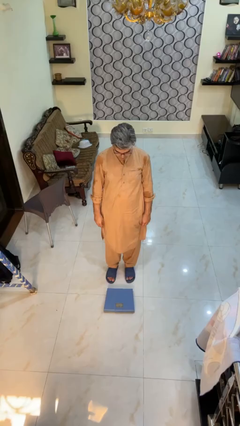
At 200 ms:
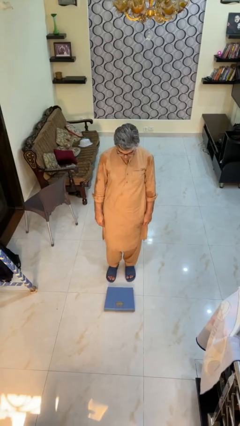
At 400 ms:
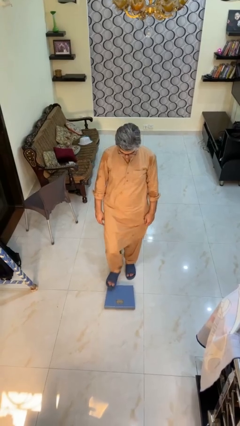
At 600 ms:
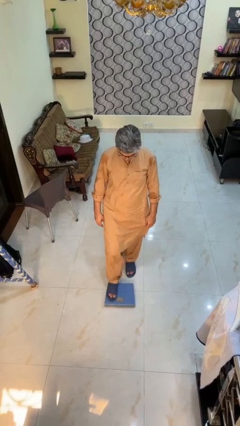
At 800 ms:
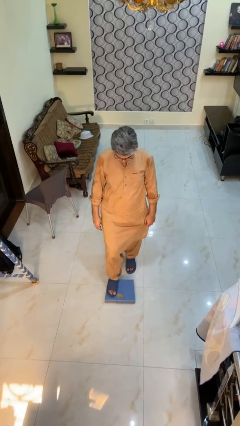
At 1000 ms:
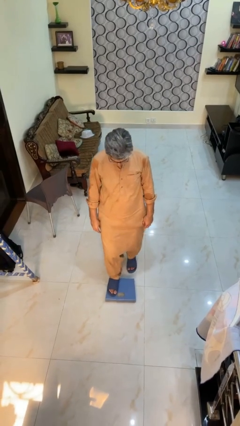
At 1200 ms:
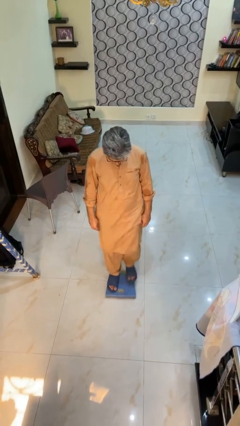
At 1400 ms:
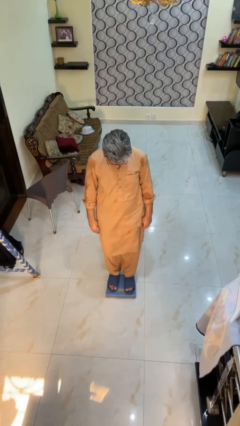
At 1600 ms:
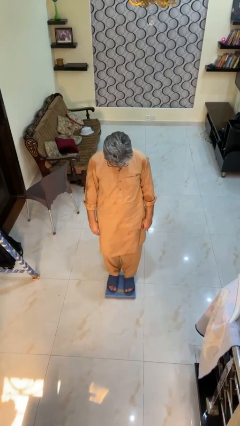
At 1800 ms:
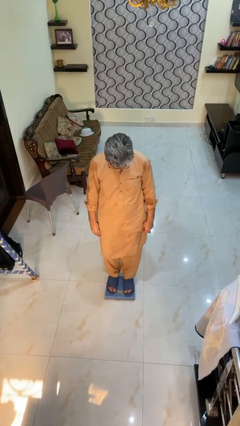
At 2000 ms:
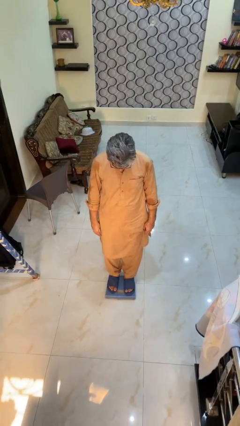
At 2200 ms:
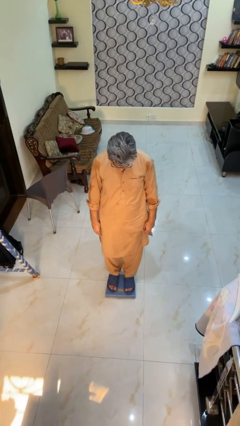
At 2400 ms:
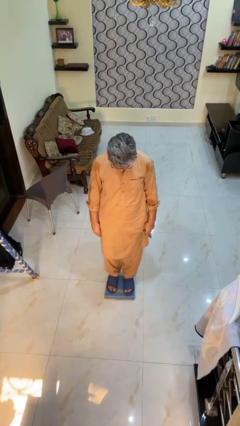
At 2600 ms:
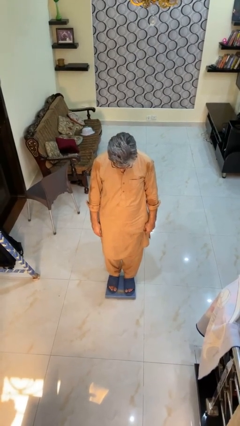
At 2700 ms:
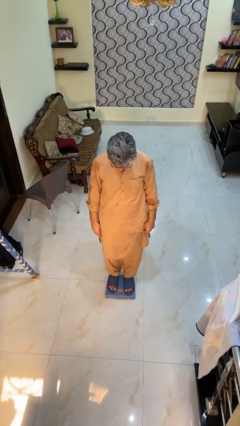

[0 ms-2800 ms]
person uses bodyweight scale

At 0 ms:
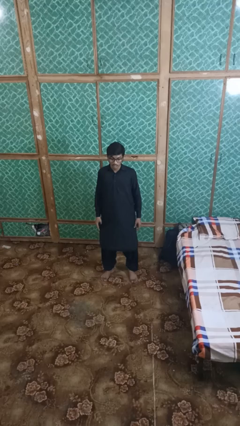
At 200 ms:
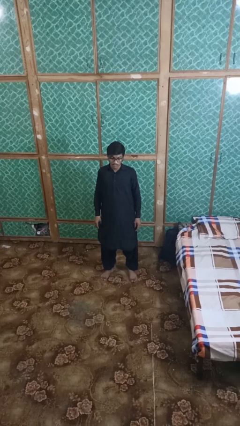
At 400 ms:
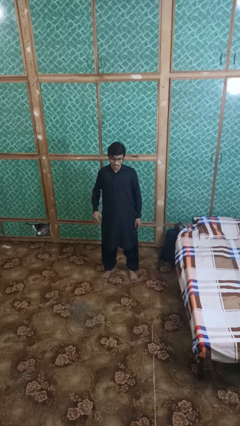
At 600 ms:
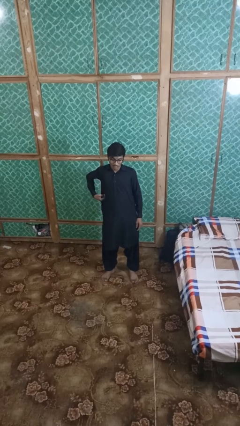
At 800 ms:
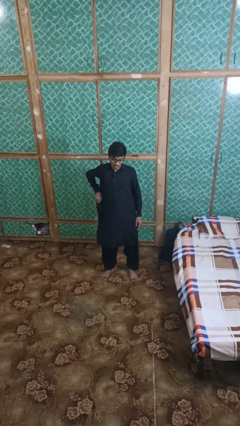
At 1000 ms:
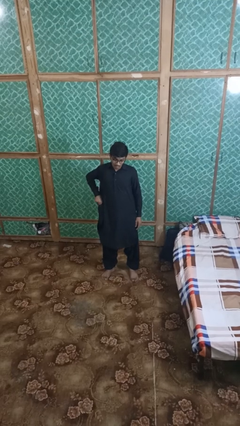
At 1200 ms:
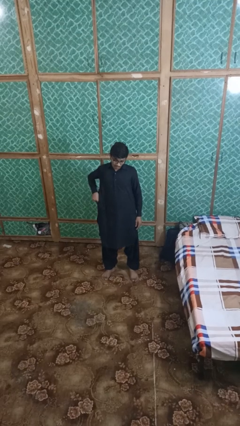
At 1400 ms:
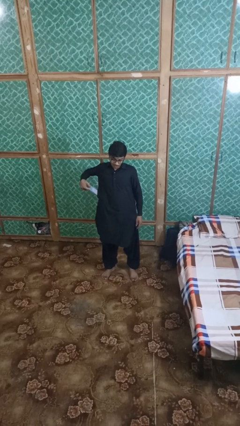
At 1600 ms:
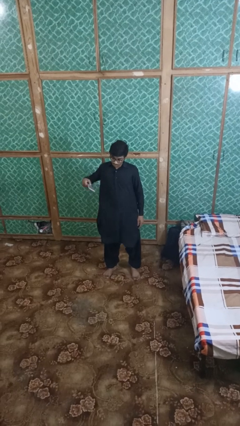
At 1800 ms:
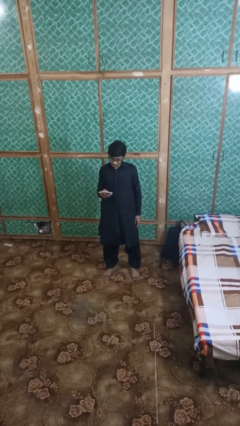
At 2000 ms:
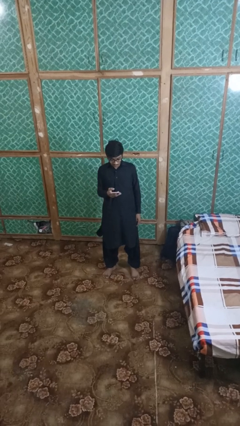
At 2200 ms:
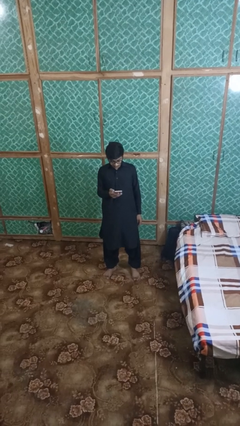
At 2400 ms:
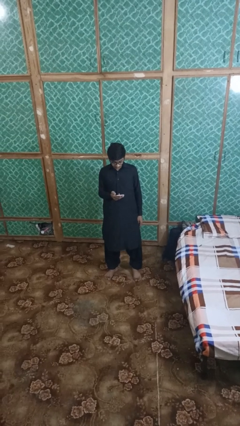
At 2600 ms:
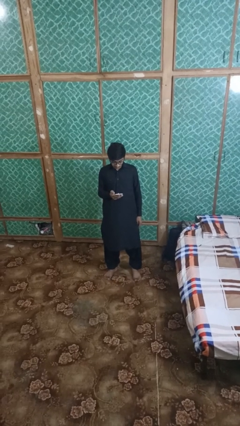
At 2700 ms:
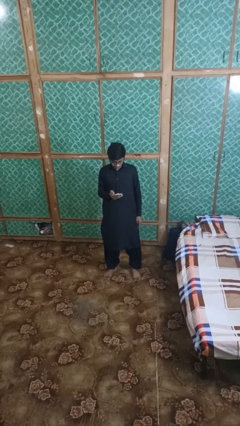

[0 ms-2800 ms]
person takes phone from pocket

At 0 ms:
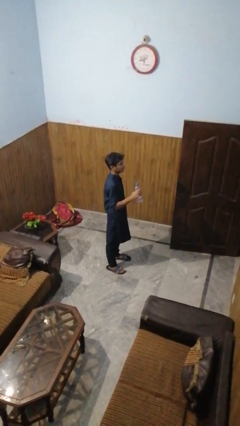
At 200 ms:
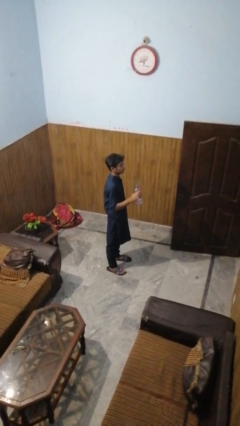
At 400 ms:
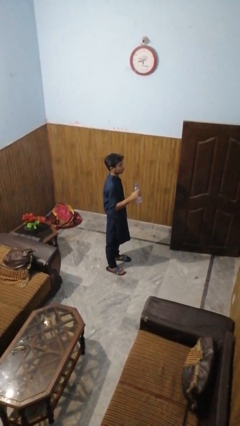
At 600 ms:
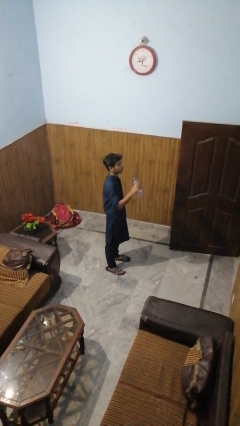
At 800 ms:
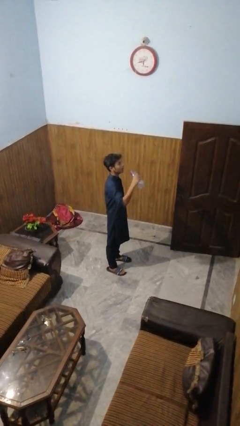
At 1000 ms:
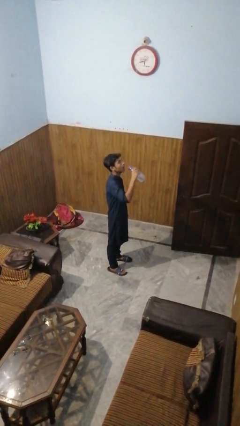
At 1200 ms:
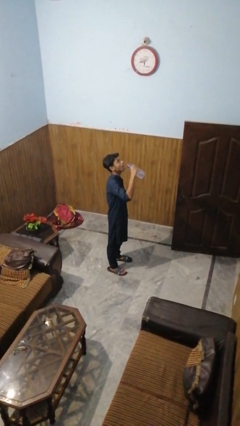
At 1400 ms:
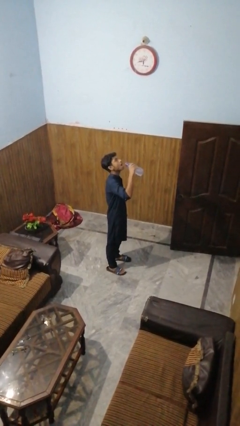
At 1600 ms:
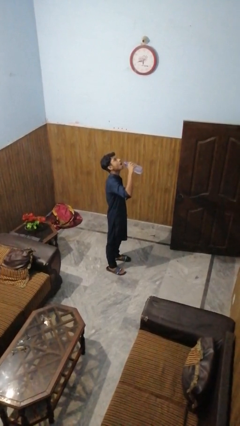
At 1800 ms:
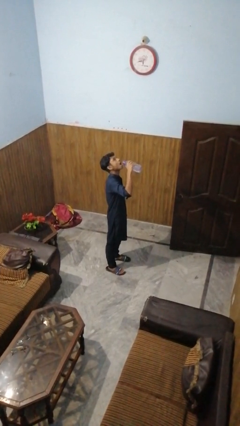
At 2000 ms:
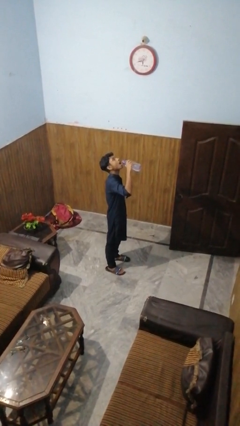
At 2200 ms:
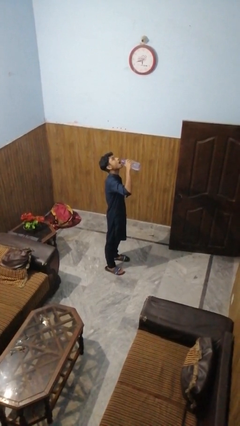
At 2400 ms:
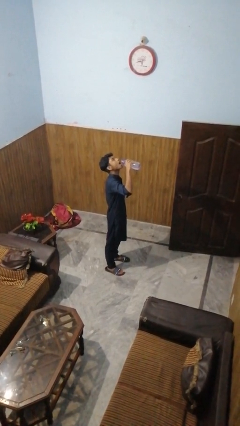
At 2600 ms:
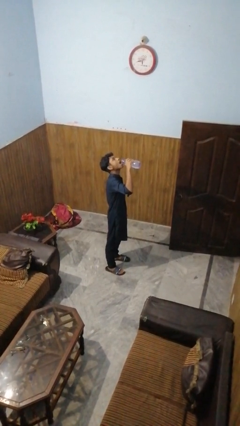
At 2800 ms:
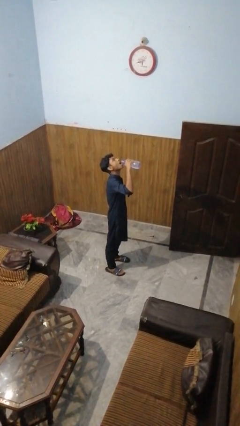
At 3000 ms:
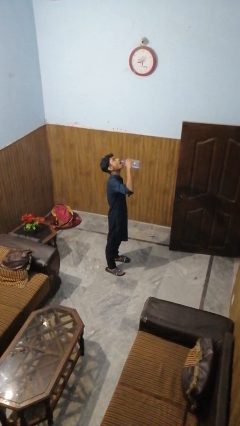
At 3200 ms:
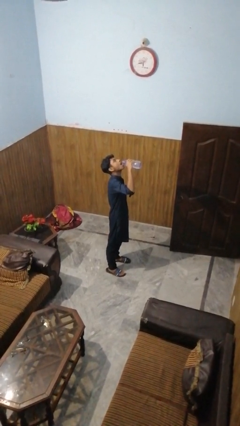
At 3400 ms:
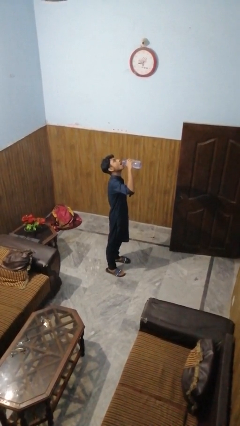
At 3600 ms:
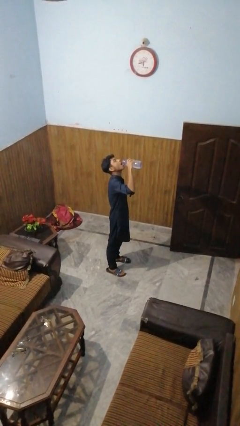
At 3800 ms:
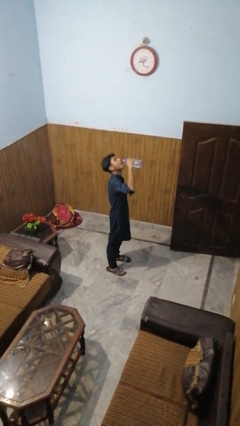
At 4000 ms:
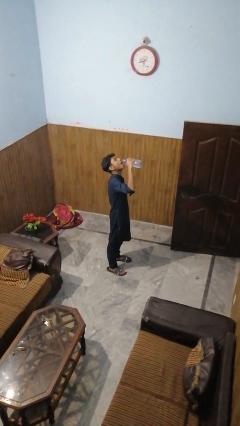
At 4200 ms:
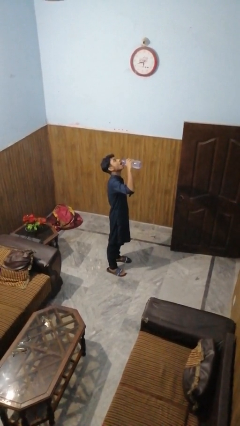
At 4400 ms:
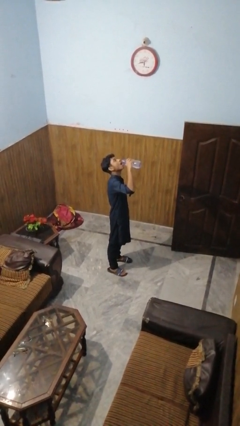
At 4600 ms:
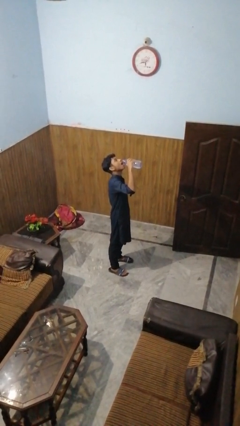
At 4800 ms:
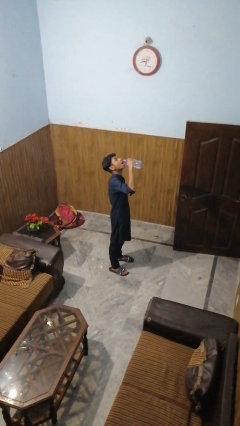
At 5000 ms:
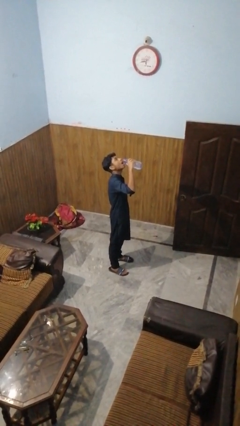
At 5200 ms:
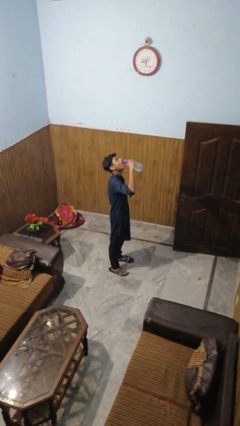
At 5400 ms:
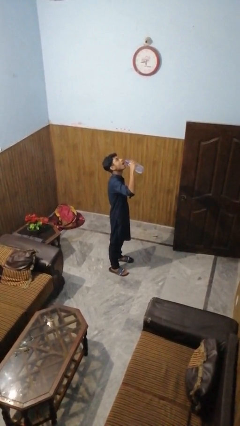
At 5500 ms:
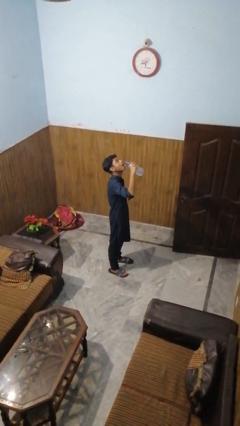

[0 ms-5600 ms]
person drinks from bottle

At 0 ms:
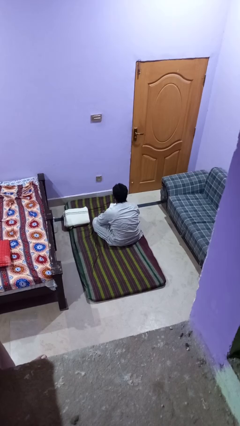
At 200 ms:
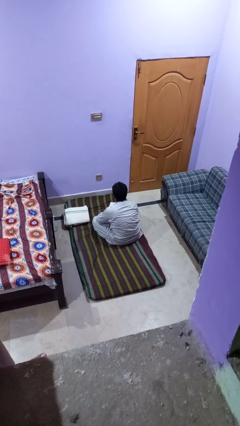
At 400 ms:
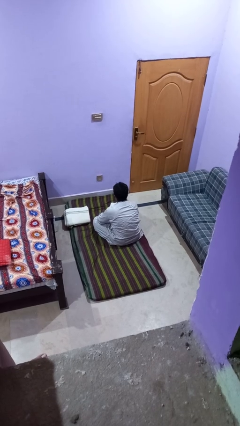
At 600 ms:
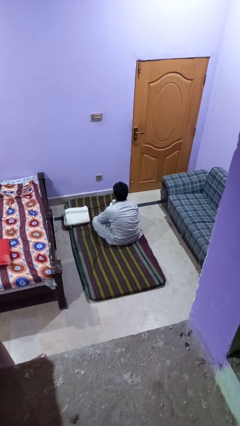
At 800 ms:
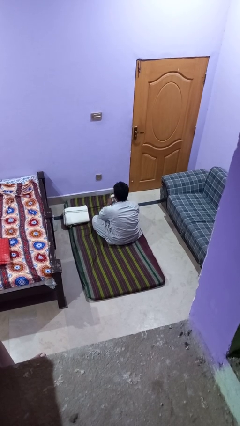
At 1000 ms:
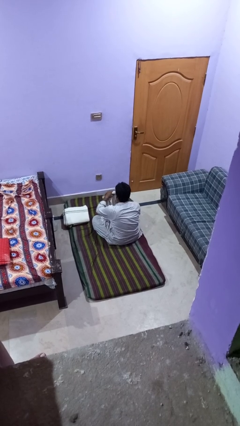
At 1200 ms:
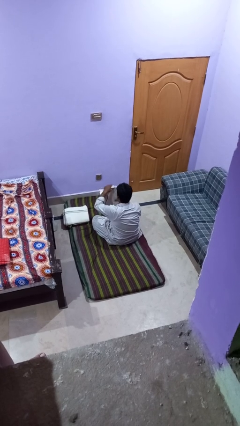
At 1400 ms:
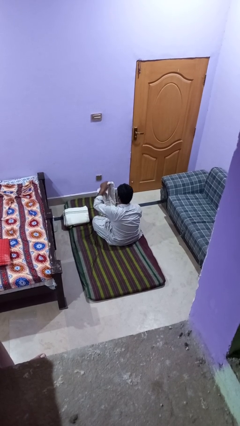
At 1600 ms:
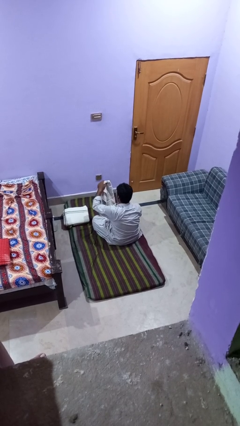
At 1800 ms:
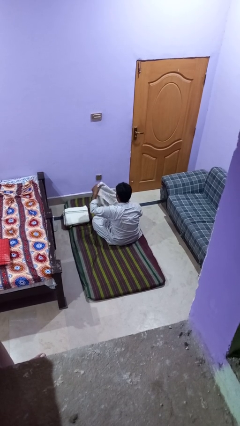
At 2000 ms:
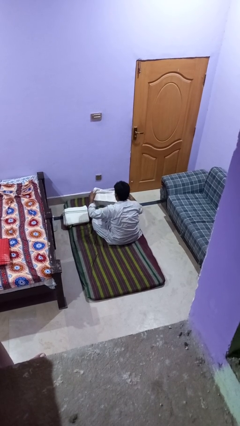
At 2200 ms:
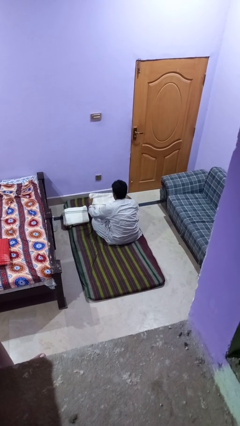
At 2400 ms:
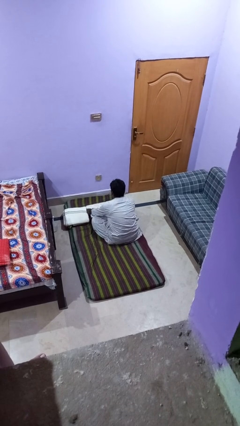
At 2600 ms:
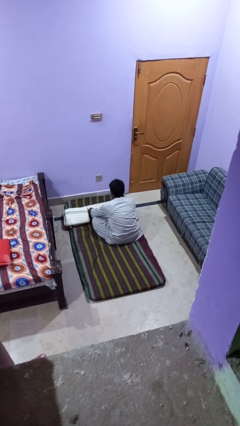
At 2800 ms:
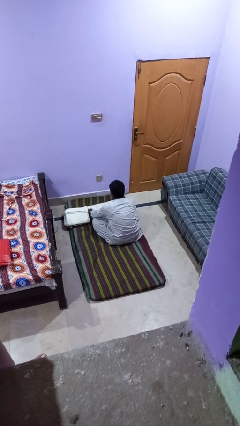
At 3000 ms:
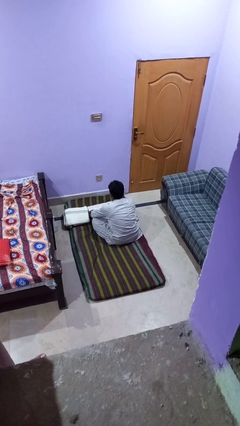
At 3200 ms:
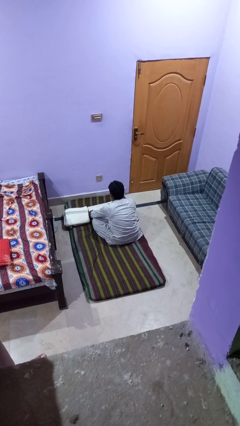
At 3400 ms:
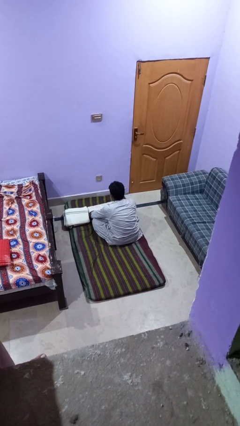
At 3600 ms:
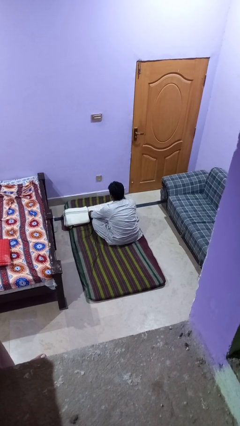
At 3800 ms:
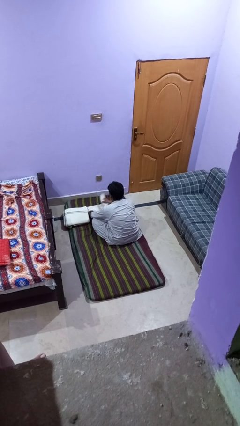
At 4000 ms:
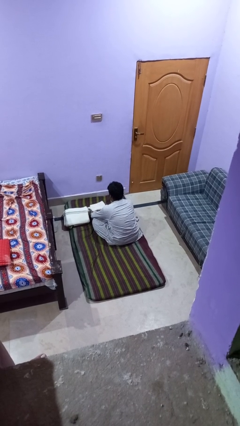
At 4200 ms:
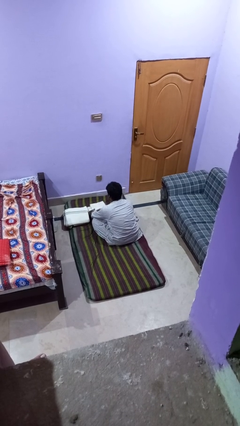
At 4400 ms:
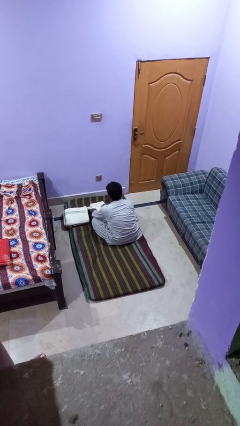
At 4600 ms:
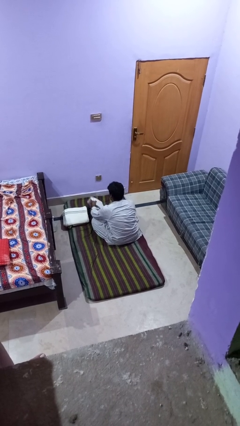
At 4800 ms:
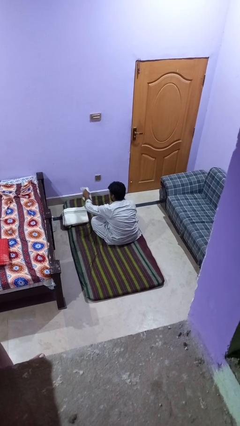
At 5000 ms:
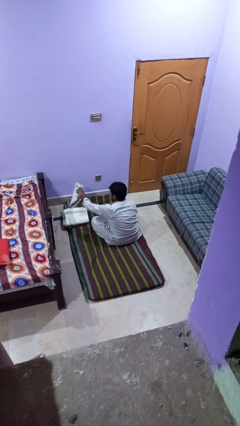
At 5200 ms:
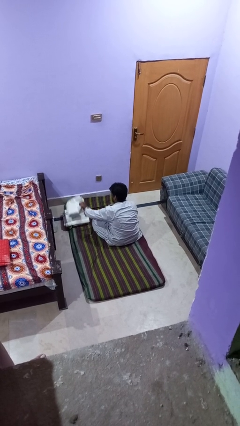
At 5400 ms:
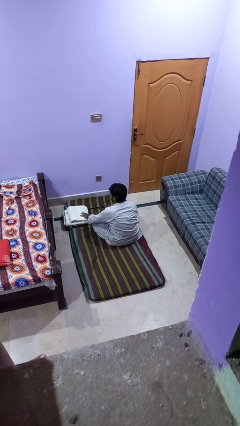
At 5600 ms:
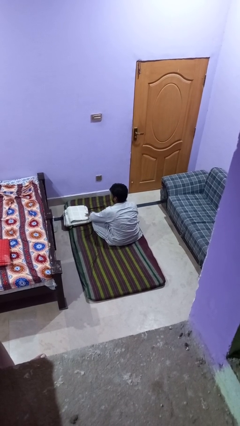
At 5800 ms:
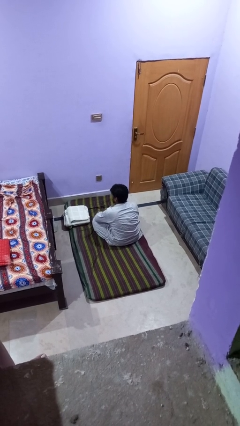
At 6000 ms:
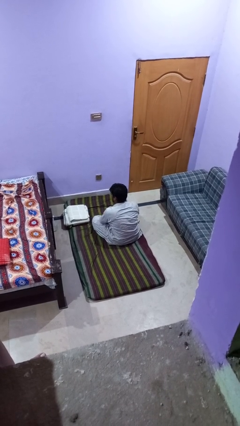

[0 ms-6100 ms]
person folds towel

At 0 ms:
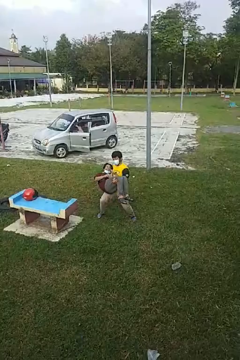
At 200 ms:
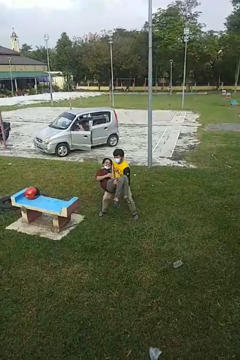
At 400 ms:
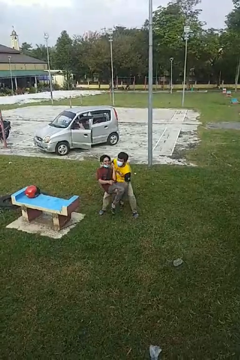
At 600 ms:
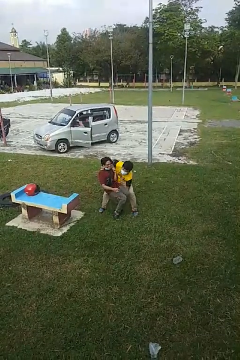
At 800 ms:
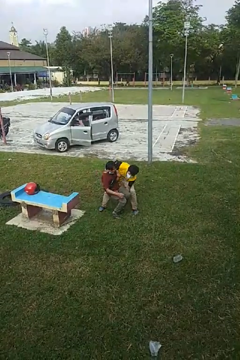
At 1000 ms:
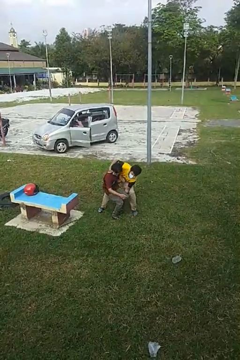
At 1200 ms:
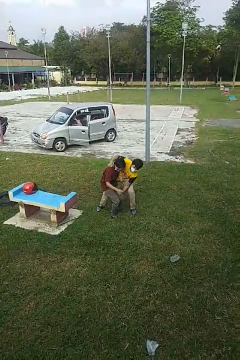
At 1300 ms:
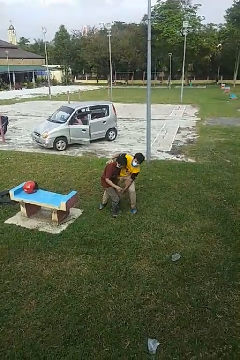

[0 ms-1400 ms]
person puts down person
